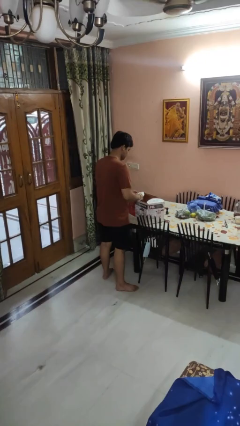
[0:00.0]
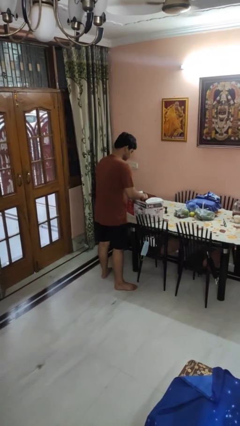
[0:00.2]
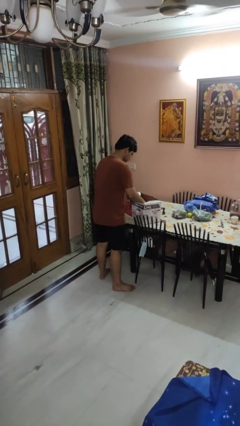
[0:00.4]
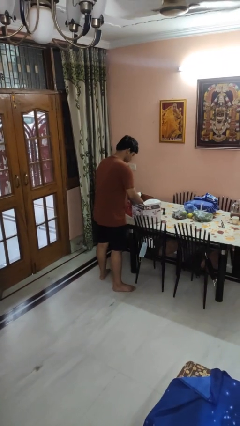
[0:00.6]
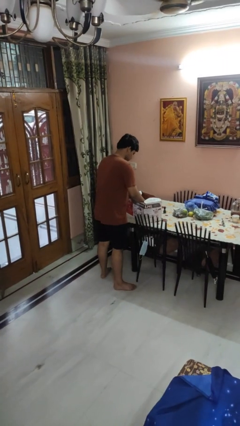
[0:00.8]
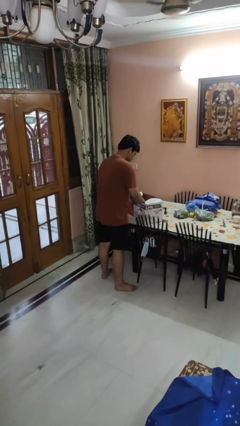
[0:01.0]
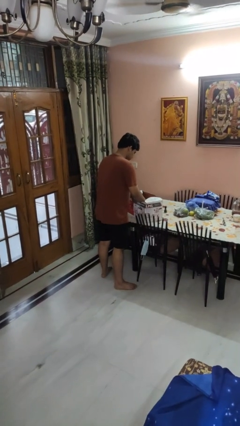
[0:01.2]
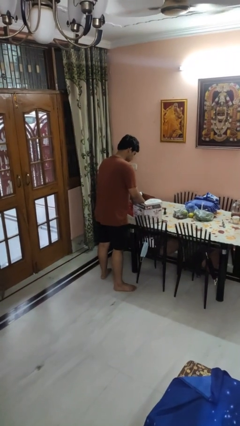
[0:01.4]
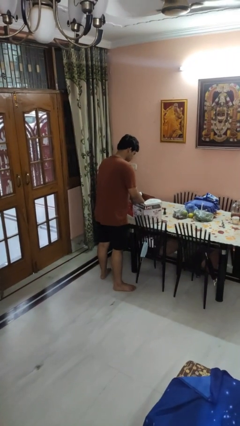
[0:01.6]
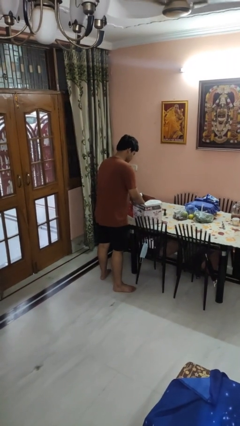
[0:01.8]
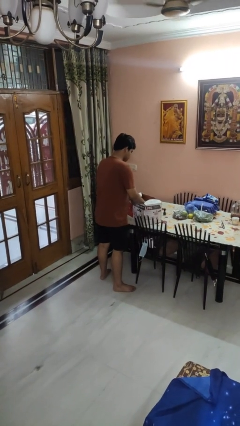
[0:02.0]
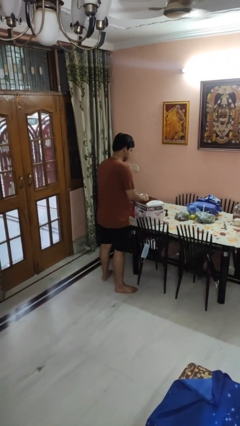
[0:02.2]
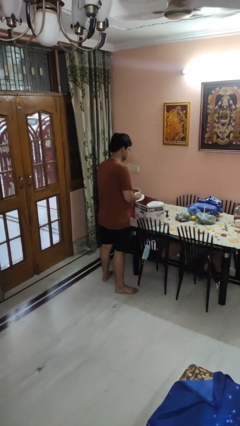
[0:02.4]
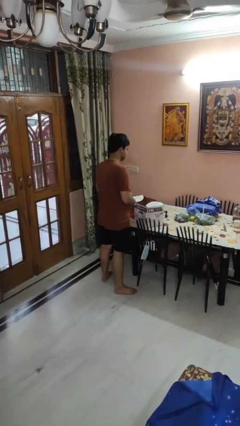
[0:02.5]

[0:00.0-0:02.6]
person searches in box

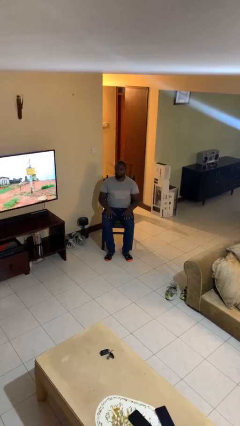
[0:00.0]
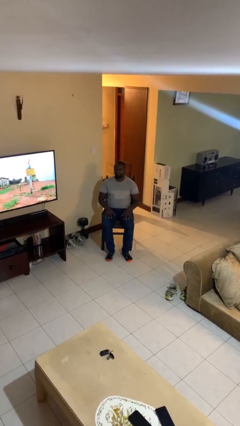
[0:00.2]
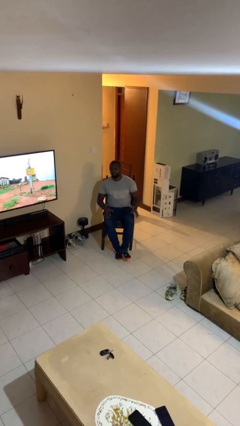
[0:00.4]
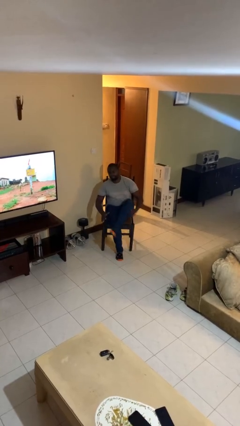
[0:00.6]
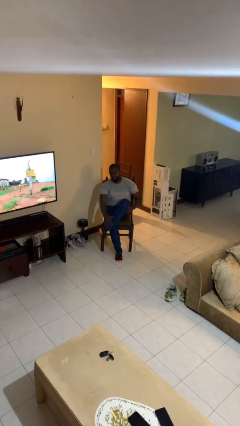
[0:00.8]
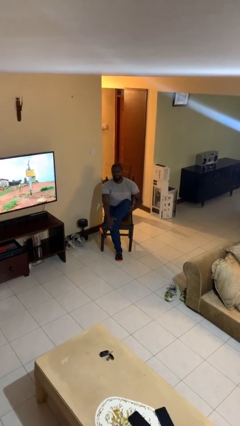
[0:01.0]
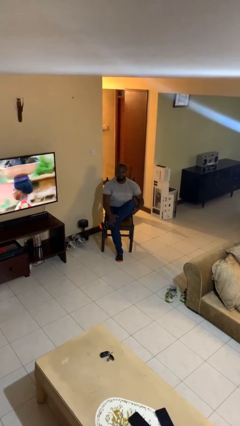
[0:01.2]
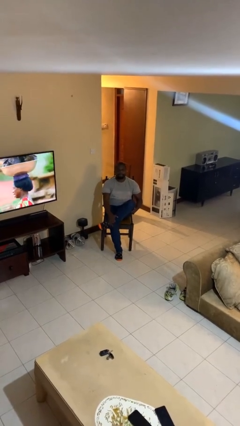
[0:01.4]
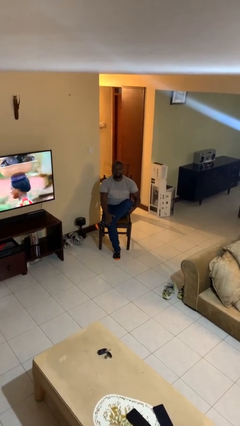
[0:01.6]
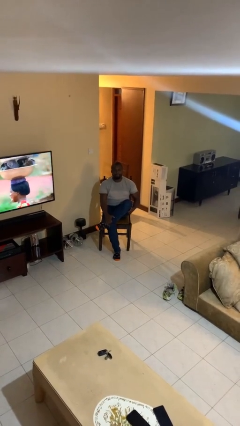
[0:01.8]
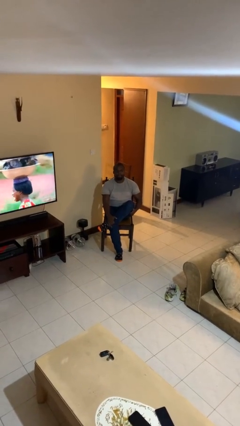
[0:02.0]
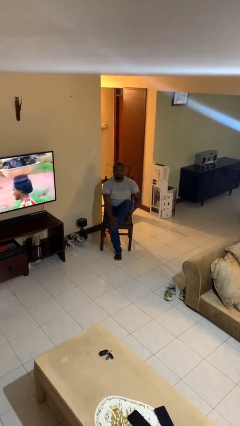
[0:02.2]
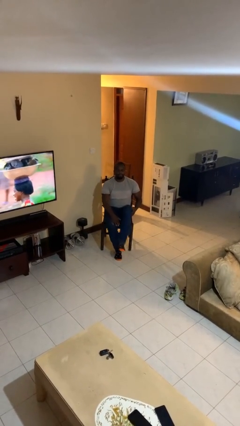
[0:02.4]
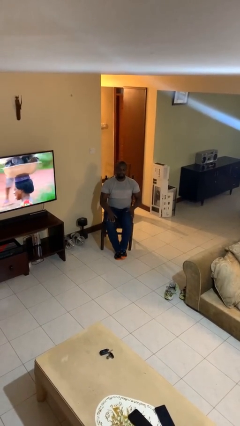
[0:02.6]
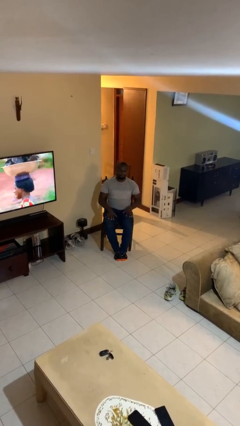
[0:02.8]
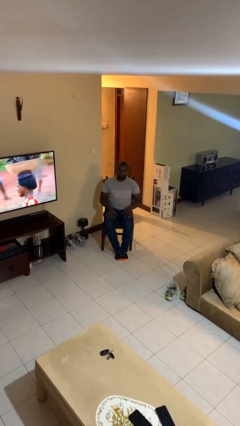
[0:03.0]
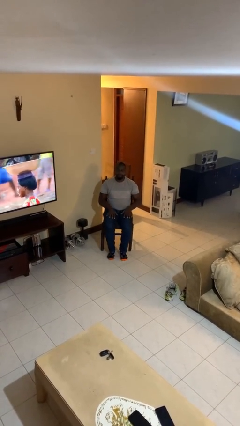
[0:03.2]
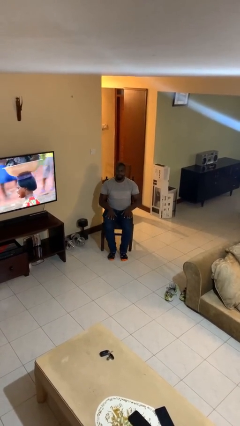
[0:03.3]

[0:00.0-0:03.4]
person crosses legs

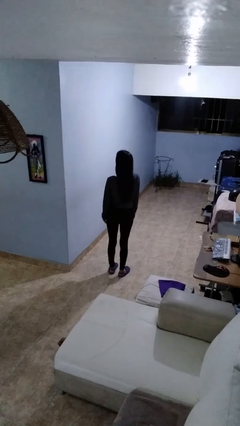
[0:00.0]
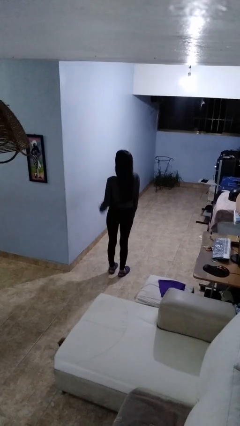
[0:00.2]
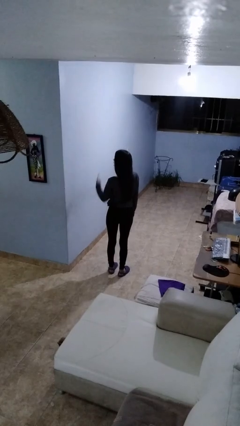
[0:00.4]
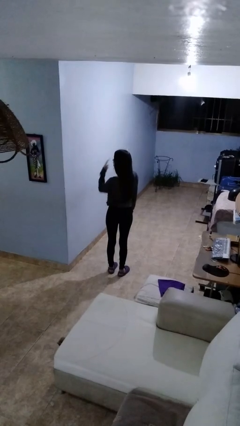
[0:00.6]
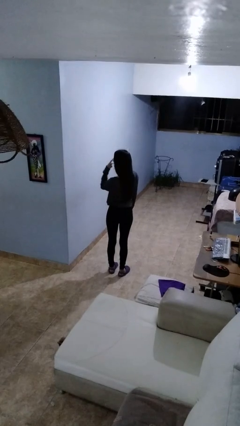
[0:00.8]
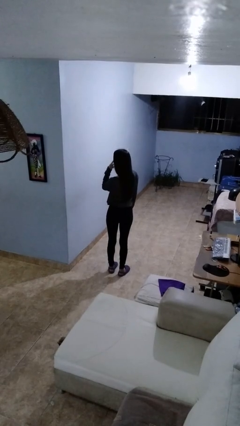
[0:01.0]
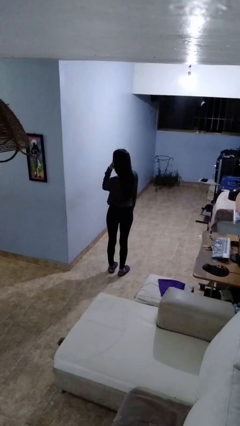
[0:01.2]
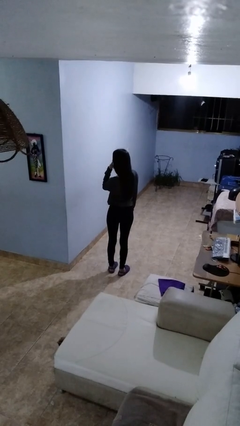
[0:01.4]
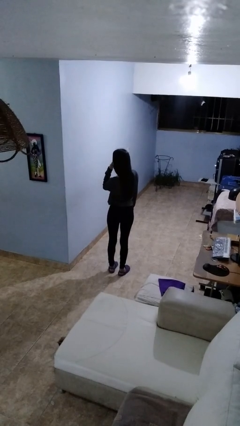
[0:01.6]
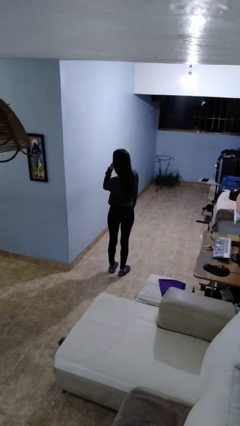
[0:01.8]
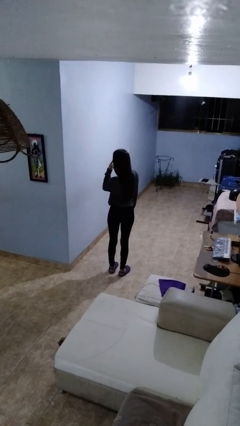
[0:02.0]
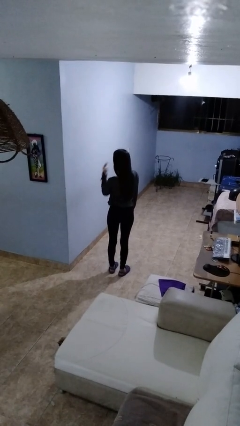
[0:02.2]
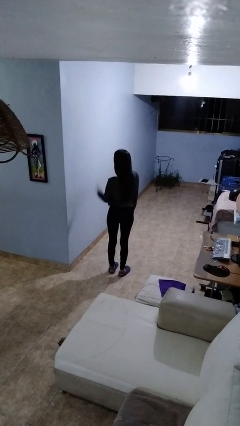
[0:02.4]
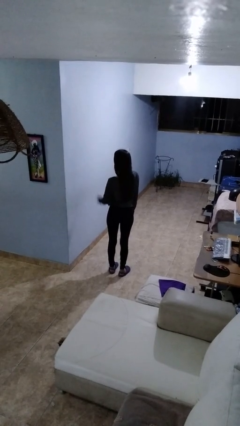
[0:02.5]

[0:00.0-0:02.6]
person gestures watch closely

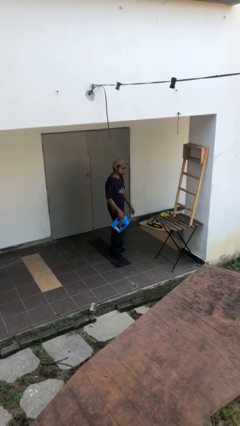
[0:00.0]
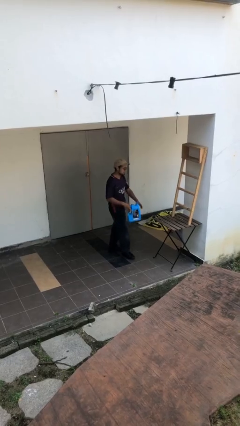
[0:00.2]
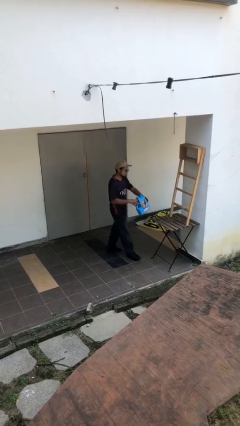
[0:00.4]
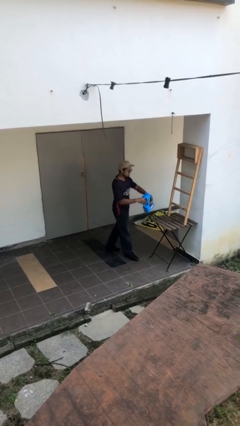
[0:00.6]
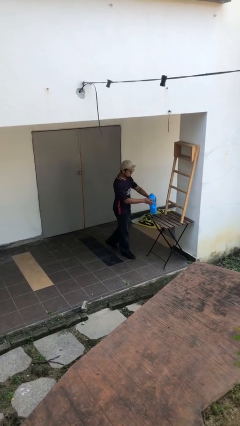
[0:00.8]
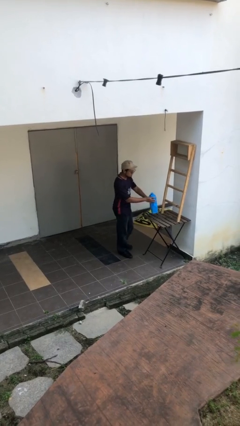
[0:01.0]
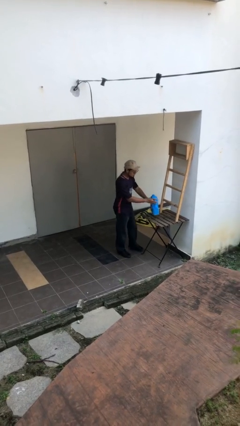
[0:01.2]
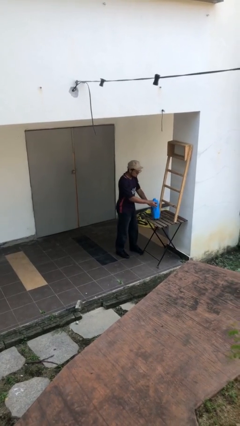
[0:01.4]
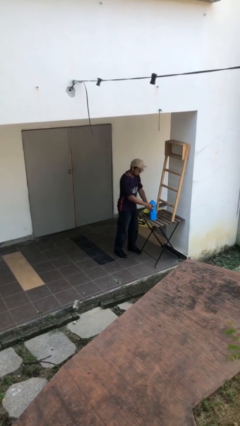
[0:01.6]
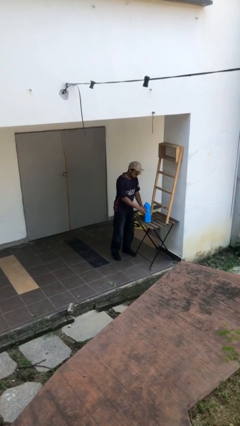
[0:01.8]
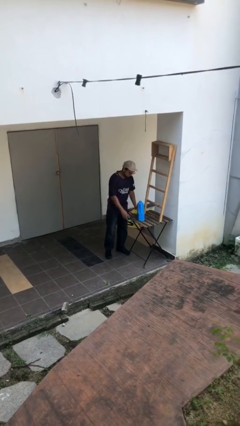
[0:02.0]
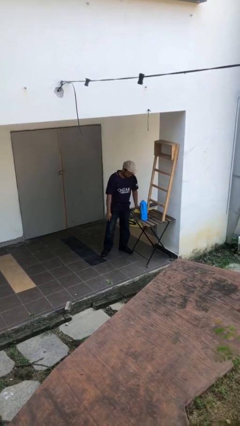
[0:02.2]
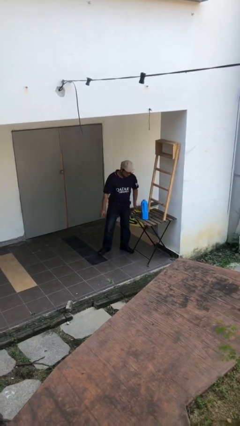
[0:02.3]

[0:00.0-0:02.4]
person puts down object on table

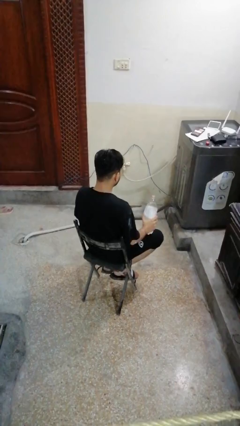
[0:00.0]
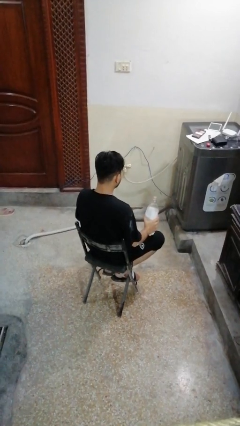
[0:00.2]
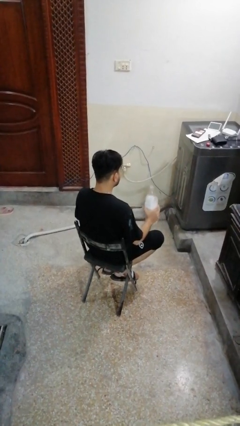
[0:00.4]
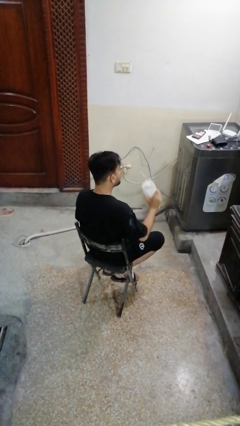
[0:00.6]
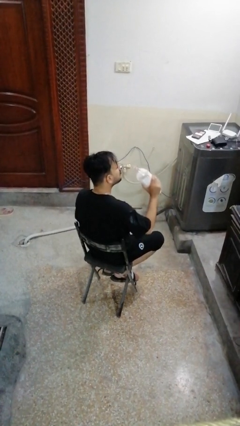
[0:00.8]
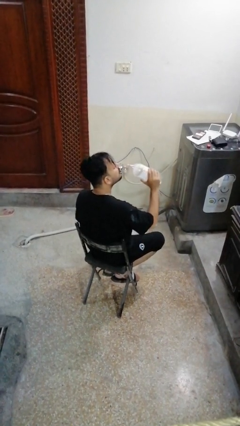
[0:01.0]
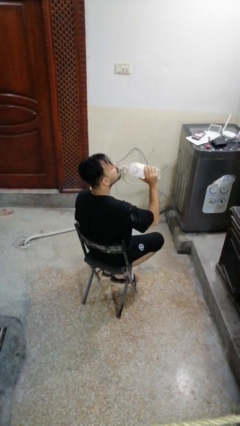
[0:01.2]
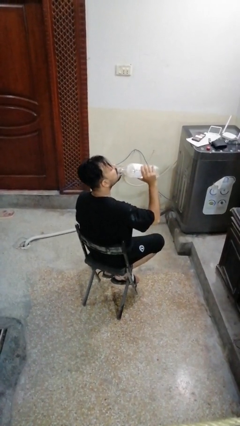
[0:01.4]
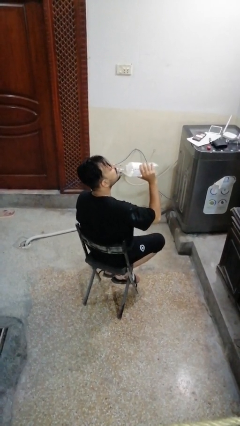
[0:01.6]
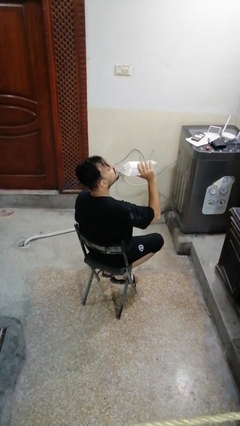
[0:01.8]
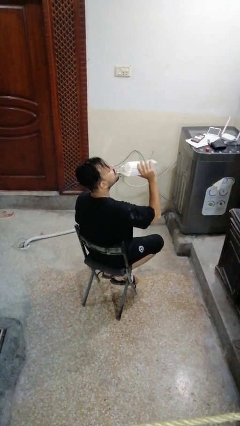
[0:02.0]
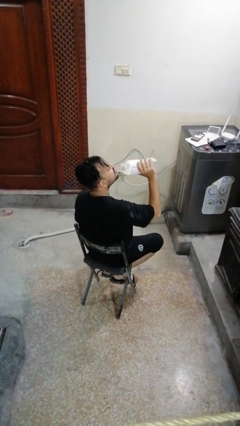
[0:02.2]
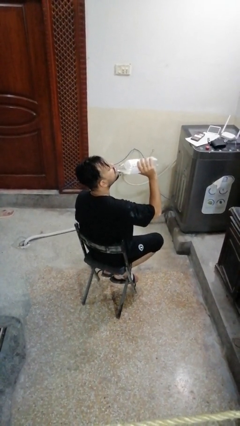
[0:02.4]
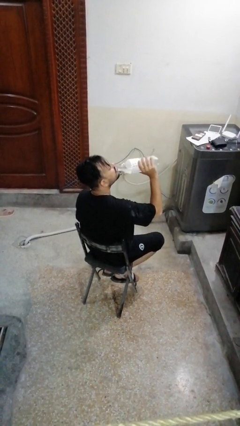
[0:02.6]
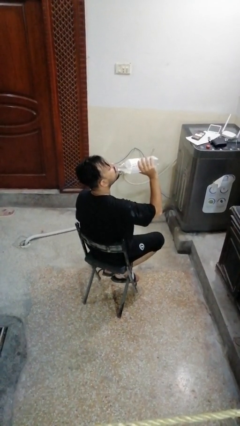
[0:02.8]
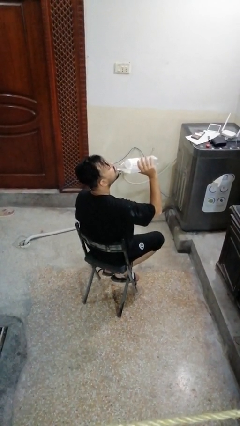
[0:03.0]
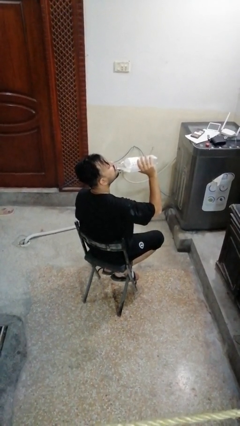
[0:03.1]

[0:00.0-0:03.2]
person drinks from bottle

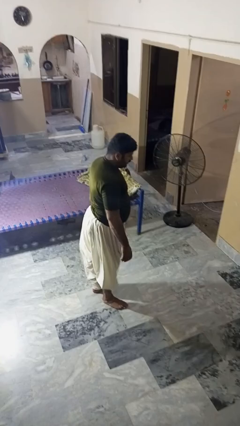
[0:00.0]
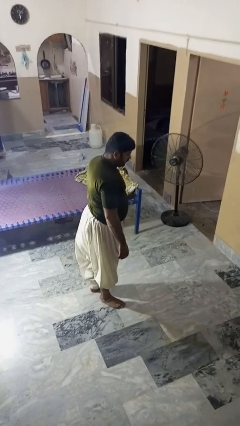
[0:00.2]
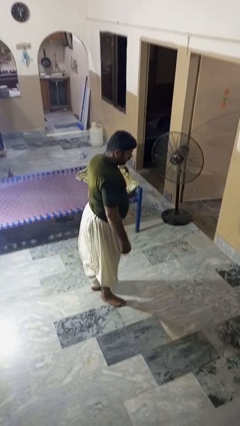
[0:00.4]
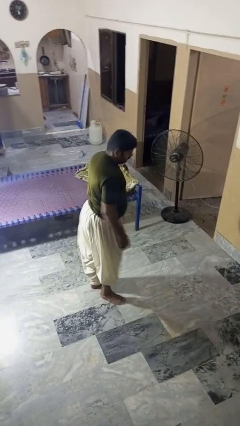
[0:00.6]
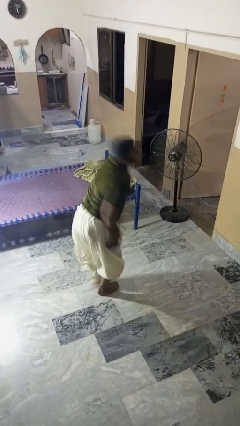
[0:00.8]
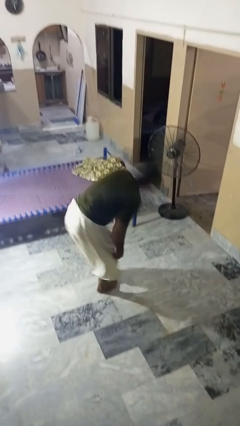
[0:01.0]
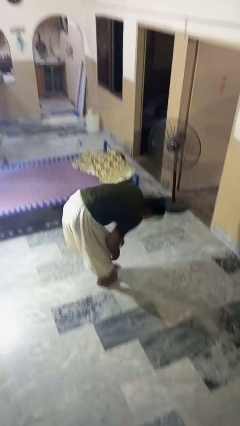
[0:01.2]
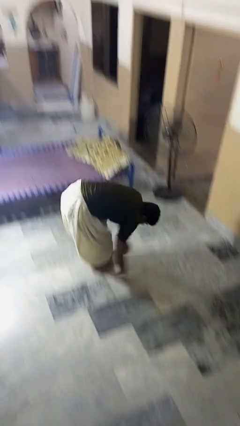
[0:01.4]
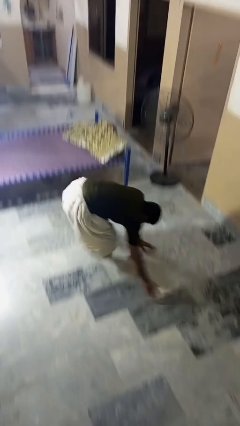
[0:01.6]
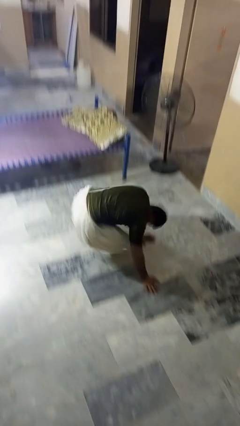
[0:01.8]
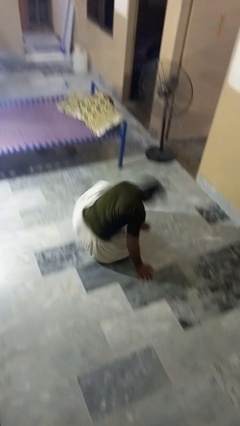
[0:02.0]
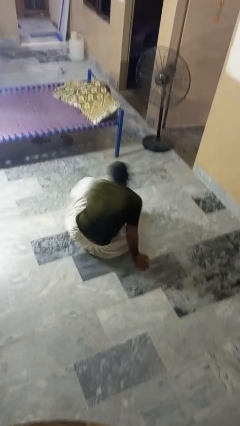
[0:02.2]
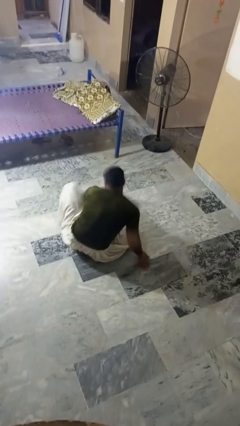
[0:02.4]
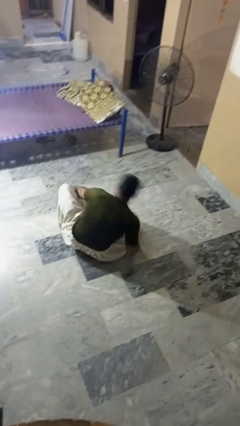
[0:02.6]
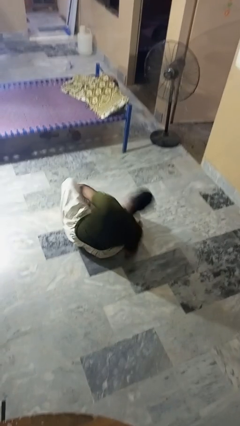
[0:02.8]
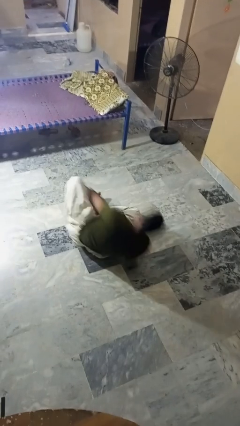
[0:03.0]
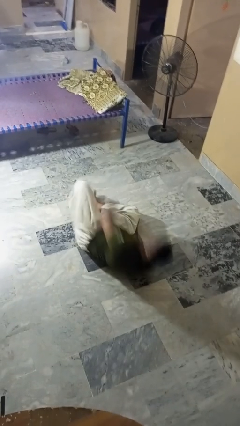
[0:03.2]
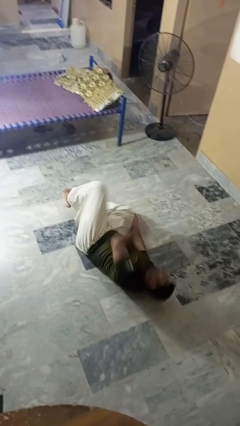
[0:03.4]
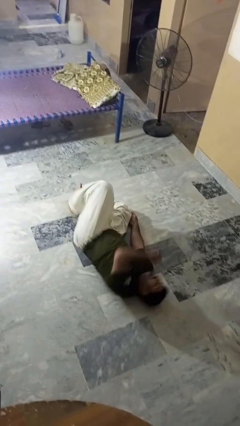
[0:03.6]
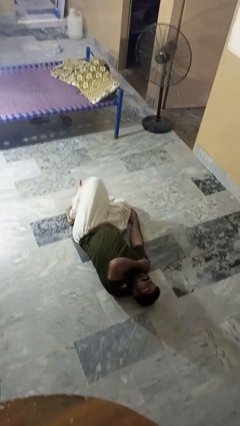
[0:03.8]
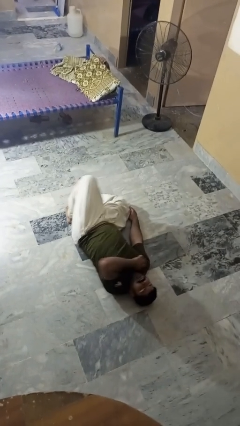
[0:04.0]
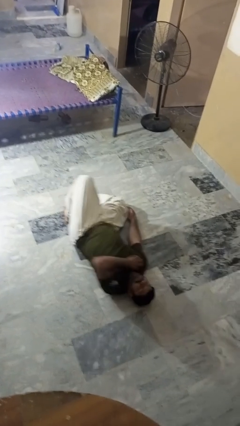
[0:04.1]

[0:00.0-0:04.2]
person falls while standing
